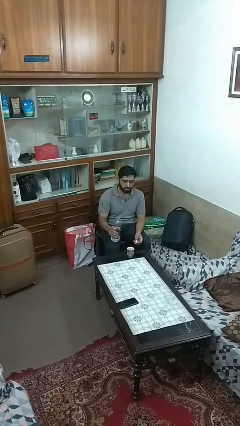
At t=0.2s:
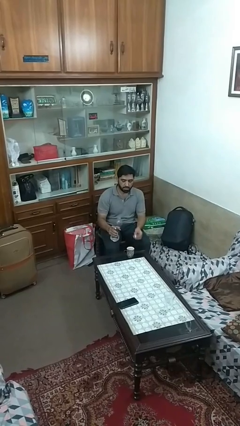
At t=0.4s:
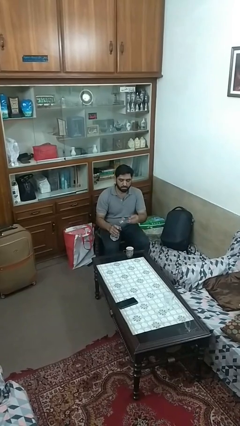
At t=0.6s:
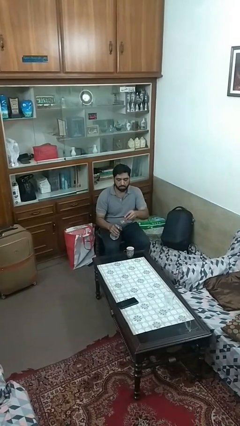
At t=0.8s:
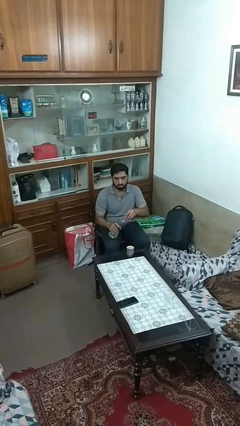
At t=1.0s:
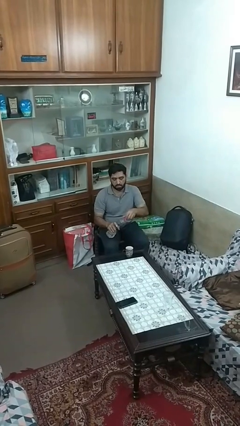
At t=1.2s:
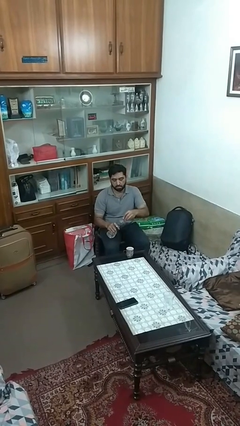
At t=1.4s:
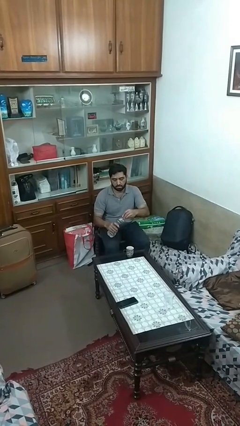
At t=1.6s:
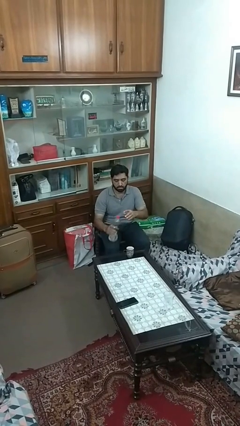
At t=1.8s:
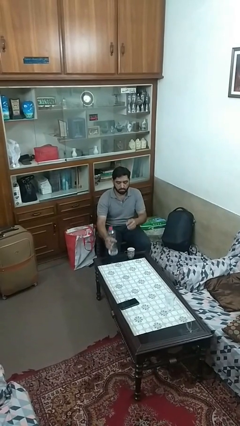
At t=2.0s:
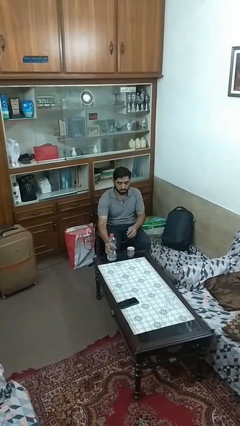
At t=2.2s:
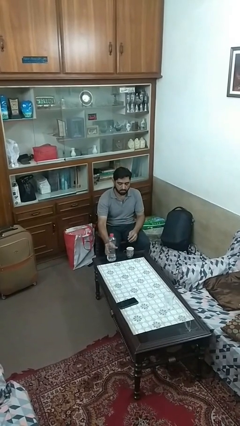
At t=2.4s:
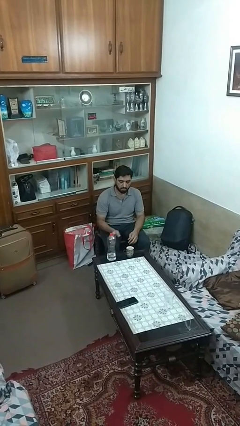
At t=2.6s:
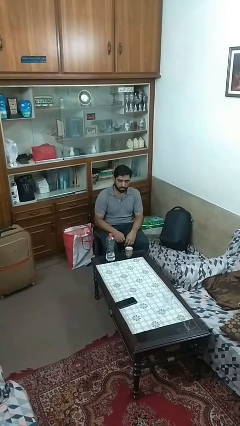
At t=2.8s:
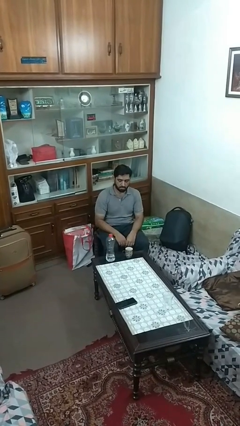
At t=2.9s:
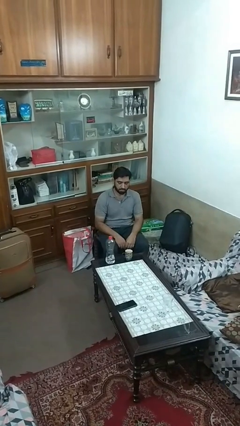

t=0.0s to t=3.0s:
person screws lid to bottle

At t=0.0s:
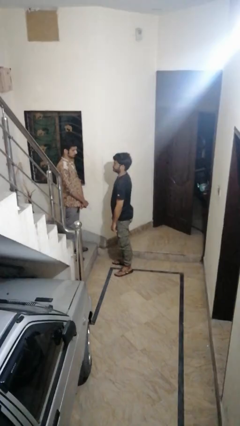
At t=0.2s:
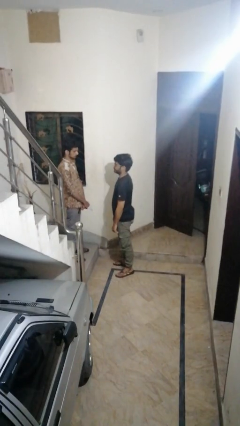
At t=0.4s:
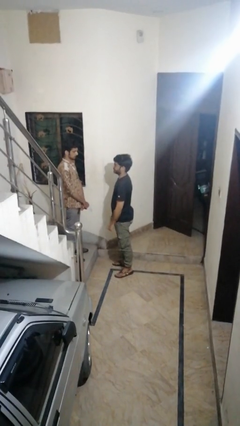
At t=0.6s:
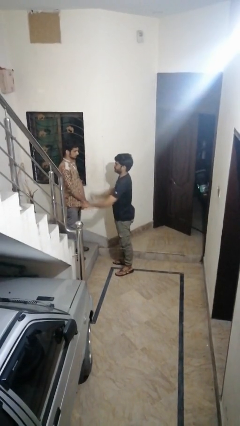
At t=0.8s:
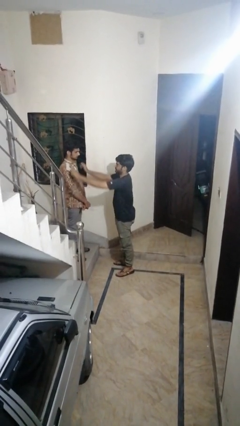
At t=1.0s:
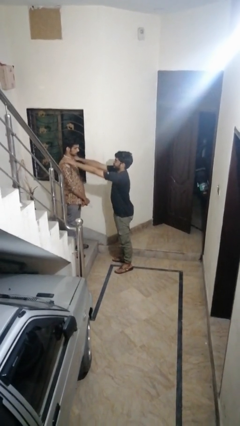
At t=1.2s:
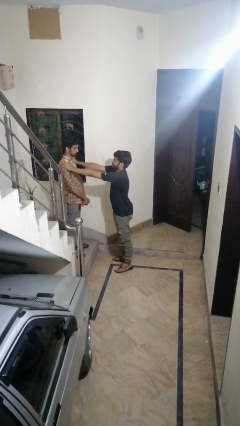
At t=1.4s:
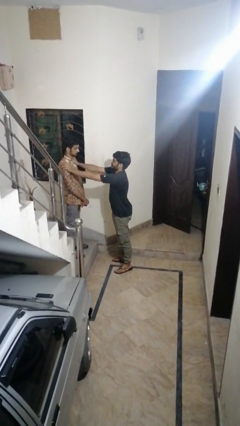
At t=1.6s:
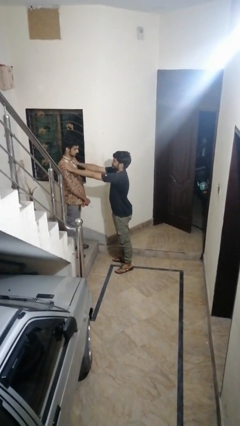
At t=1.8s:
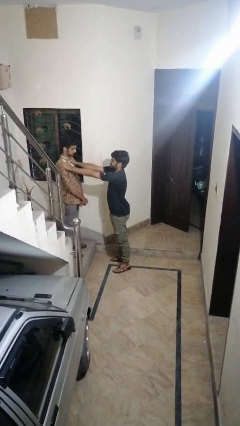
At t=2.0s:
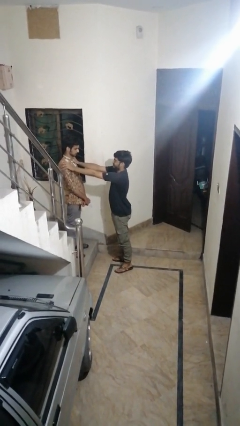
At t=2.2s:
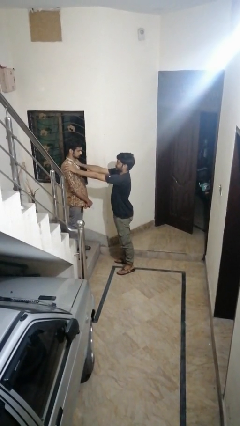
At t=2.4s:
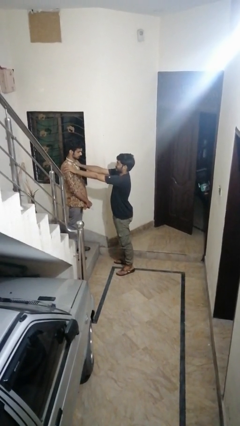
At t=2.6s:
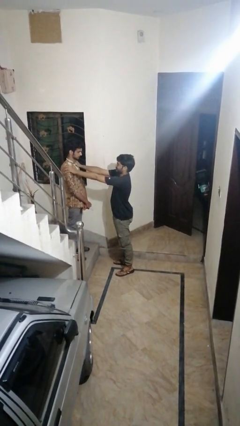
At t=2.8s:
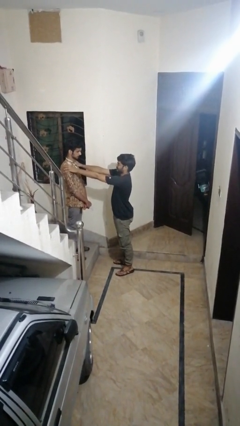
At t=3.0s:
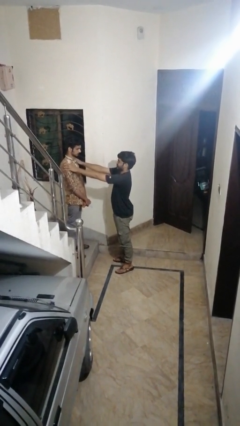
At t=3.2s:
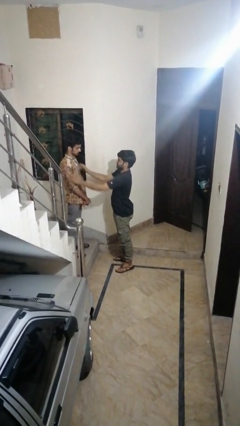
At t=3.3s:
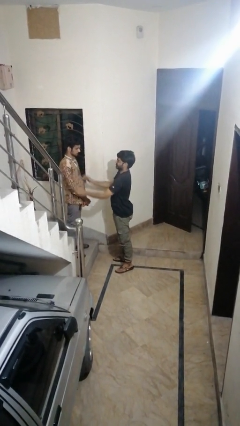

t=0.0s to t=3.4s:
person pounds shoulders of person

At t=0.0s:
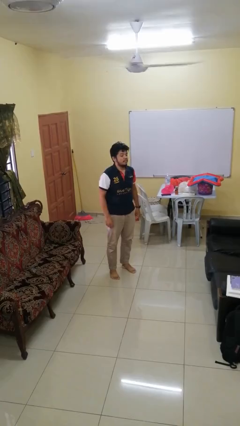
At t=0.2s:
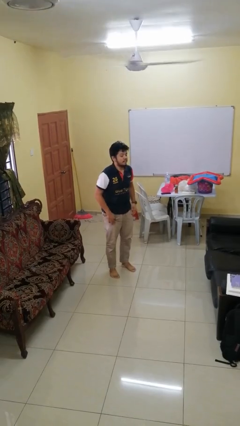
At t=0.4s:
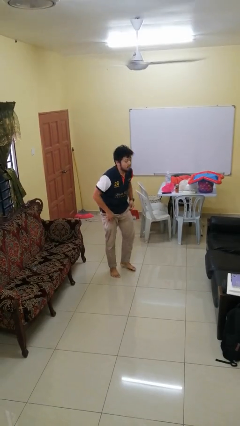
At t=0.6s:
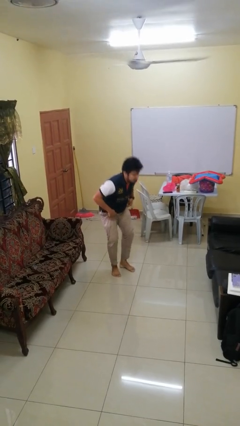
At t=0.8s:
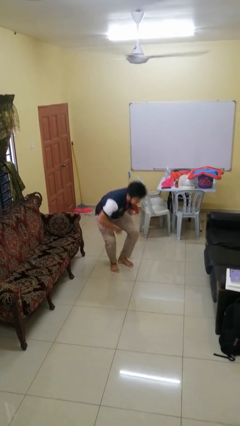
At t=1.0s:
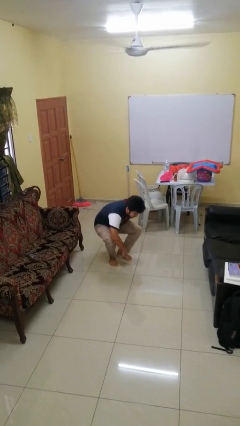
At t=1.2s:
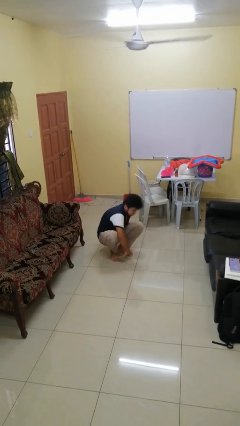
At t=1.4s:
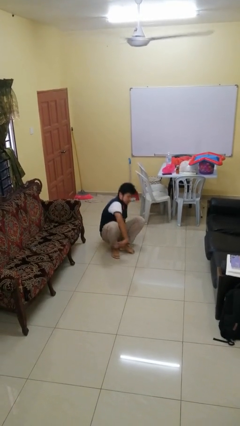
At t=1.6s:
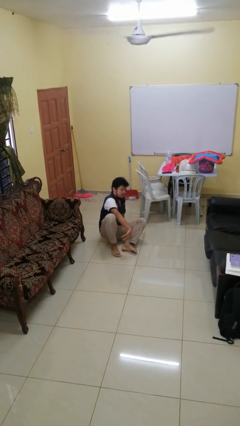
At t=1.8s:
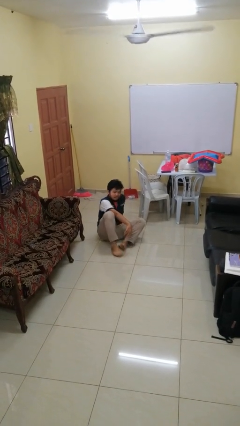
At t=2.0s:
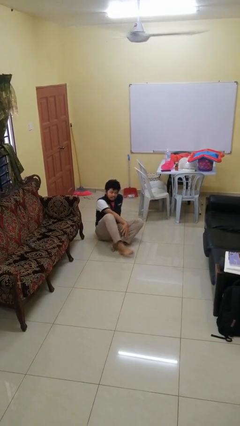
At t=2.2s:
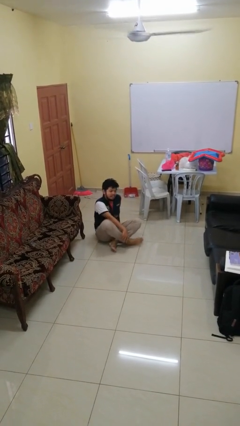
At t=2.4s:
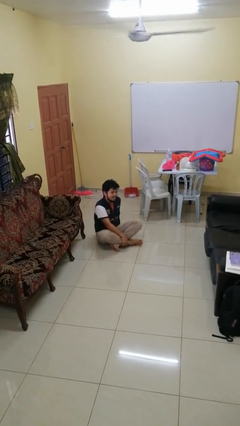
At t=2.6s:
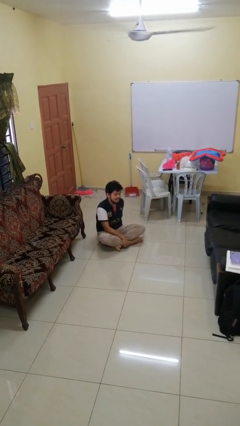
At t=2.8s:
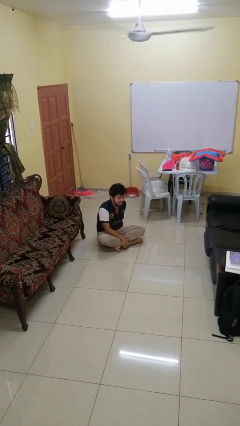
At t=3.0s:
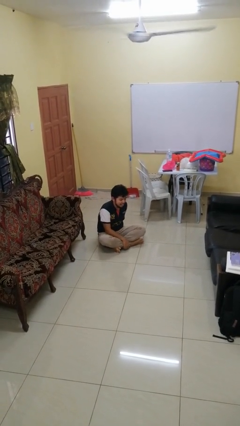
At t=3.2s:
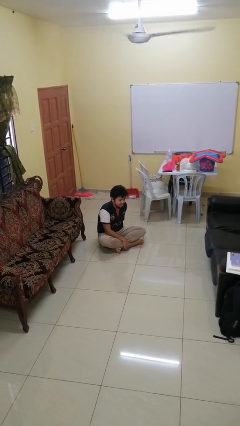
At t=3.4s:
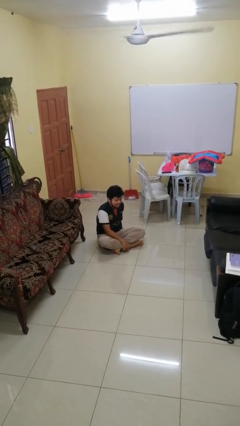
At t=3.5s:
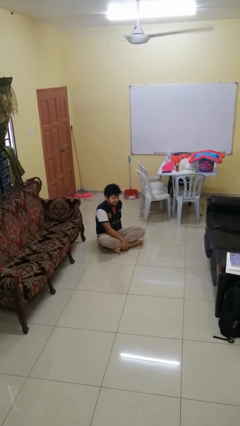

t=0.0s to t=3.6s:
person sits crisscross

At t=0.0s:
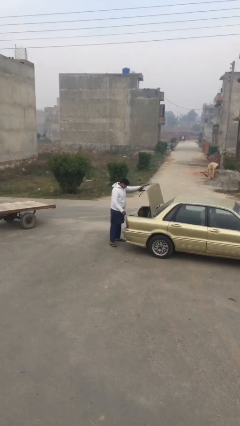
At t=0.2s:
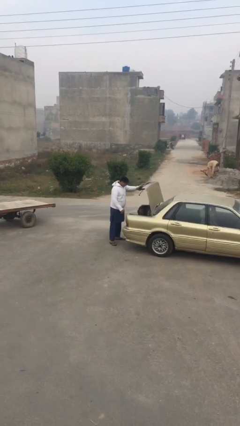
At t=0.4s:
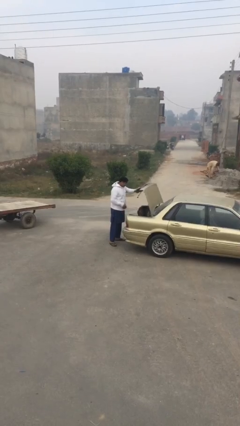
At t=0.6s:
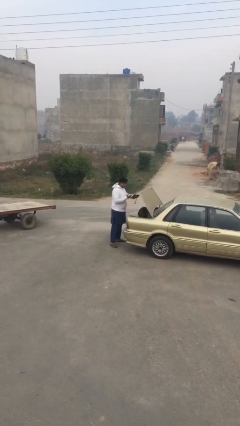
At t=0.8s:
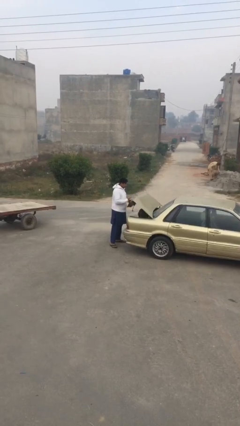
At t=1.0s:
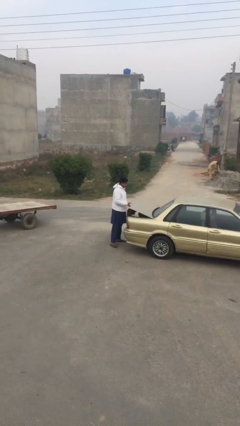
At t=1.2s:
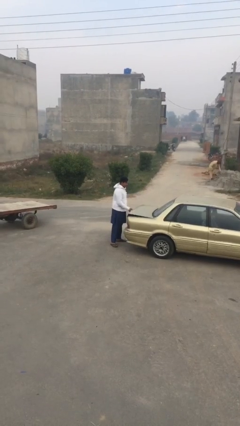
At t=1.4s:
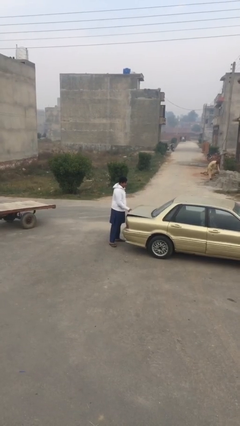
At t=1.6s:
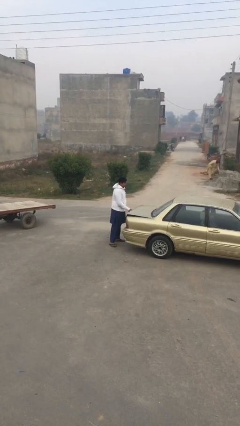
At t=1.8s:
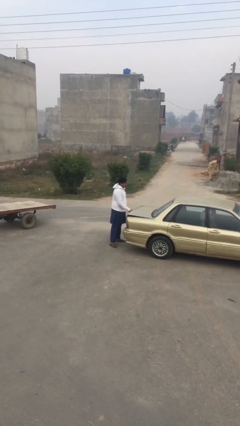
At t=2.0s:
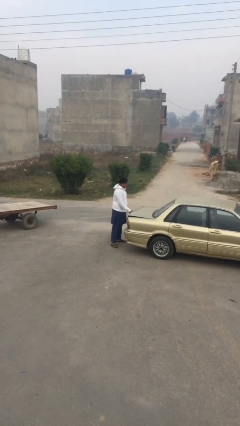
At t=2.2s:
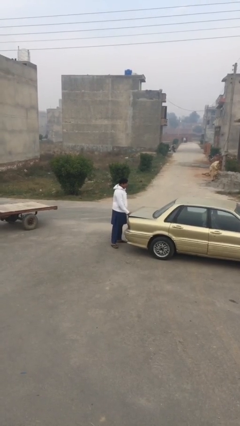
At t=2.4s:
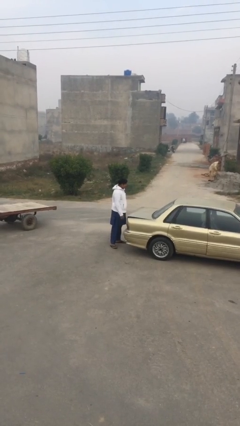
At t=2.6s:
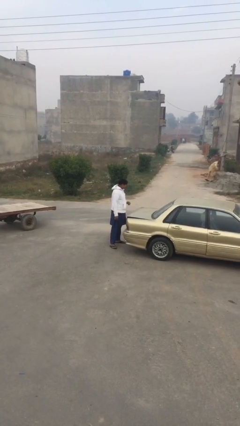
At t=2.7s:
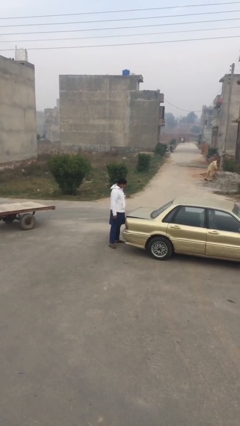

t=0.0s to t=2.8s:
person closes car trunk

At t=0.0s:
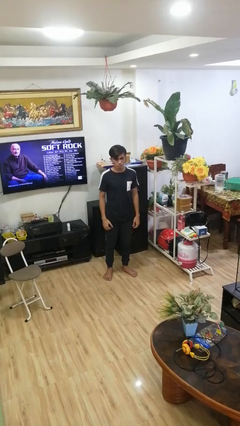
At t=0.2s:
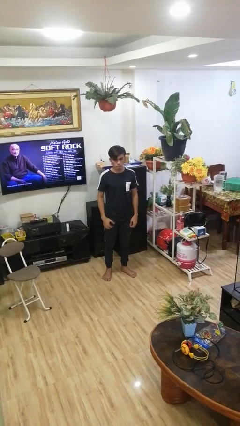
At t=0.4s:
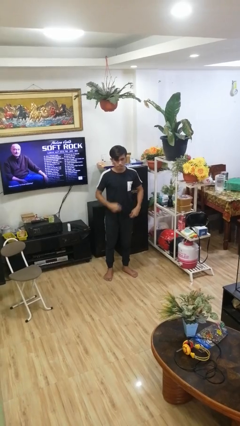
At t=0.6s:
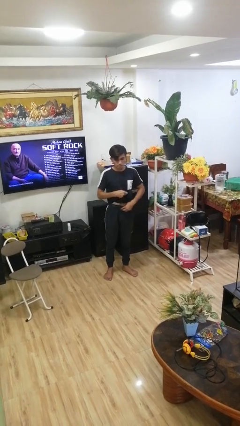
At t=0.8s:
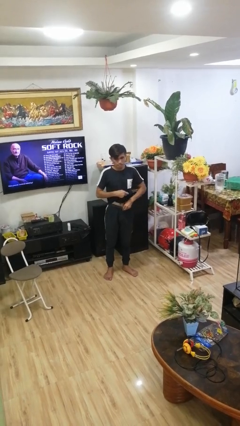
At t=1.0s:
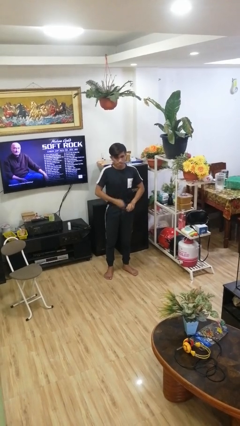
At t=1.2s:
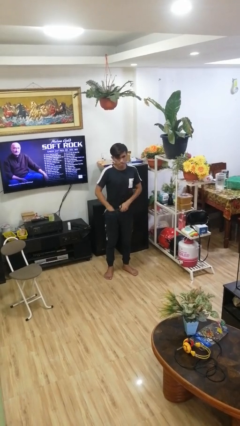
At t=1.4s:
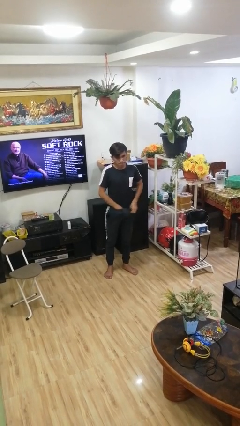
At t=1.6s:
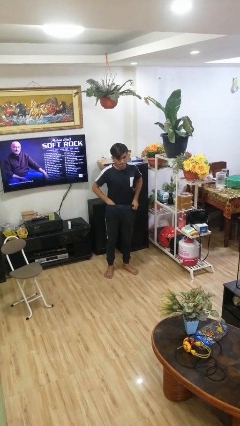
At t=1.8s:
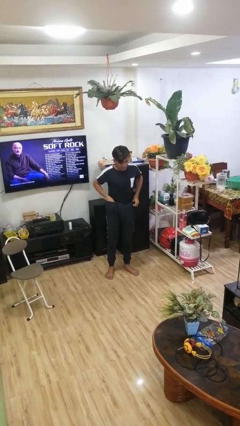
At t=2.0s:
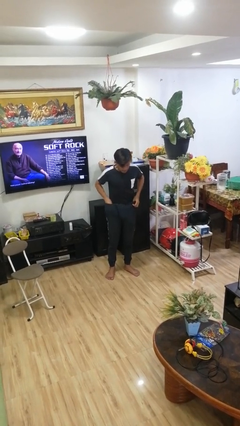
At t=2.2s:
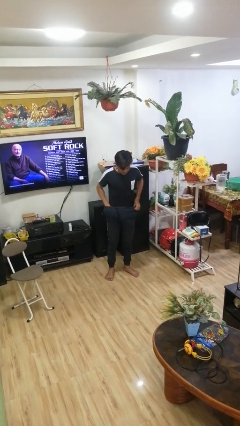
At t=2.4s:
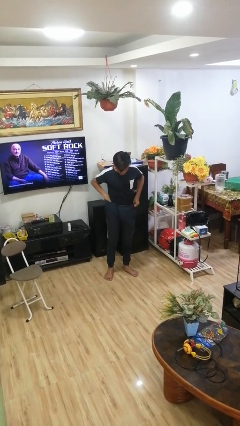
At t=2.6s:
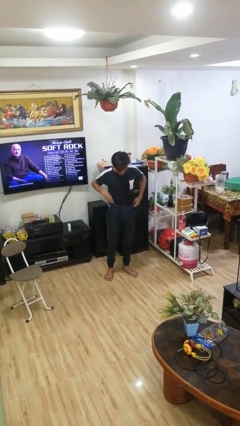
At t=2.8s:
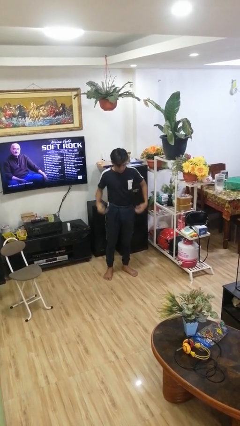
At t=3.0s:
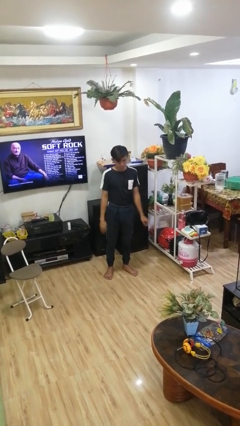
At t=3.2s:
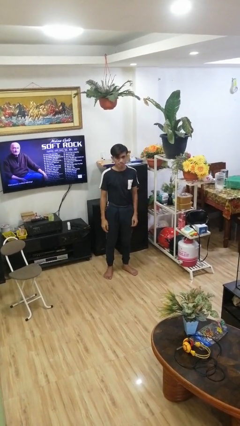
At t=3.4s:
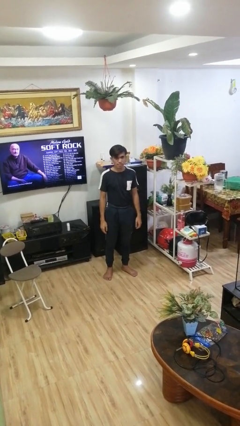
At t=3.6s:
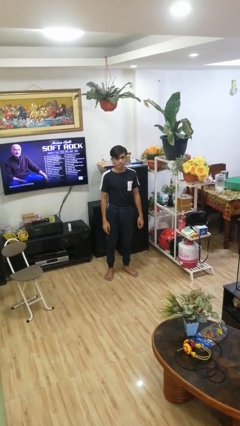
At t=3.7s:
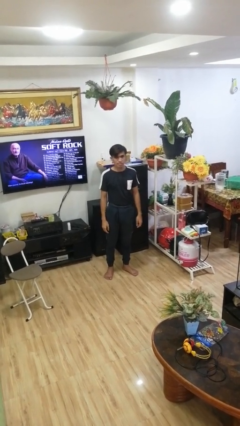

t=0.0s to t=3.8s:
person tucks in shirt

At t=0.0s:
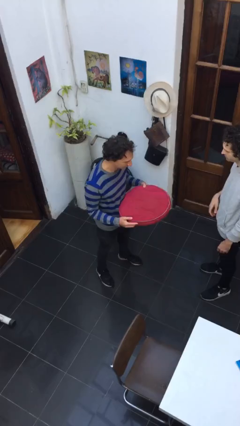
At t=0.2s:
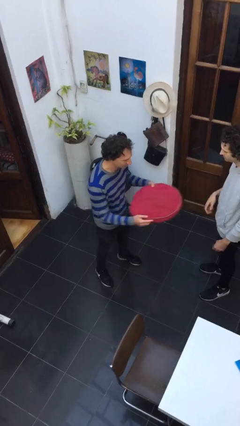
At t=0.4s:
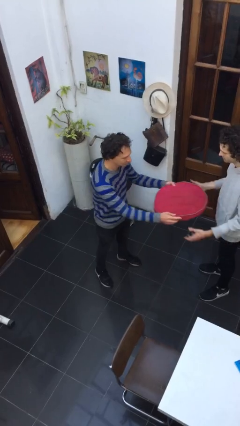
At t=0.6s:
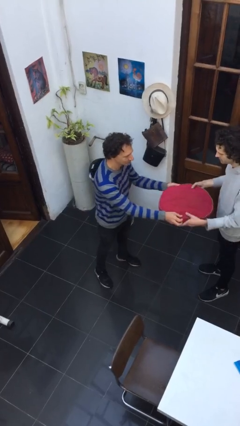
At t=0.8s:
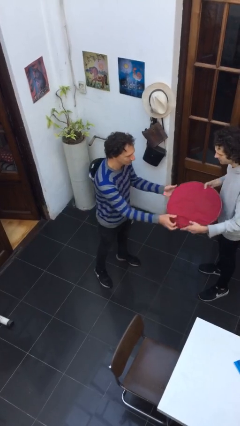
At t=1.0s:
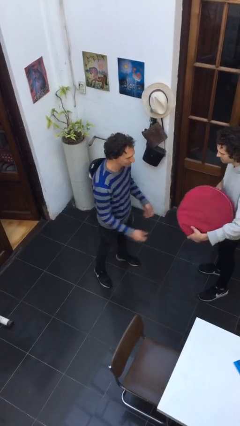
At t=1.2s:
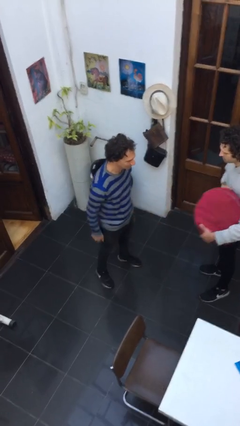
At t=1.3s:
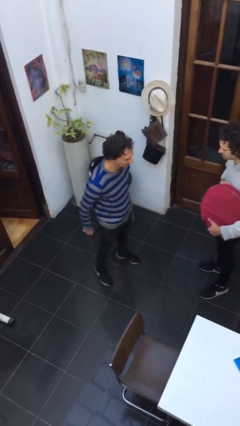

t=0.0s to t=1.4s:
person transfers object to person
